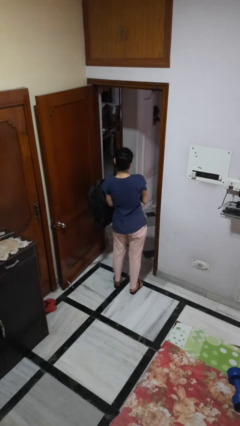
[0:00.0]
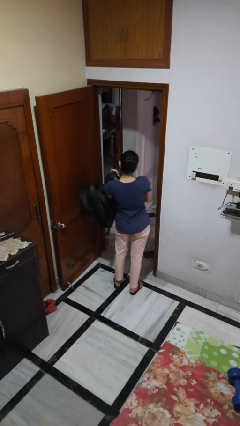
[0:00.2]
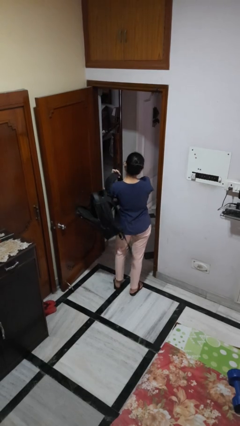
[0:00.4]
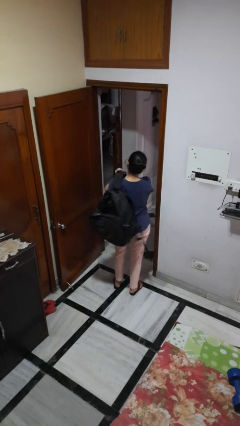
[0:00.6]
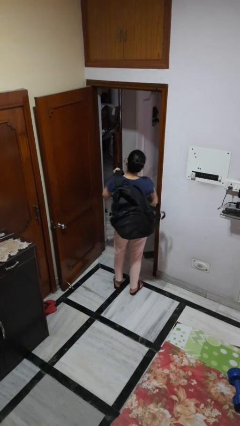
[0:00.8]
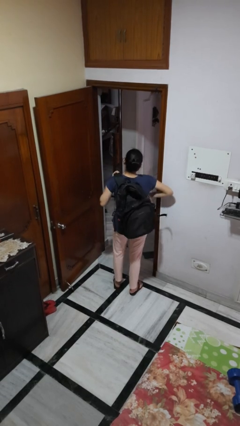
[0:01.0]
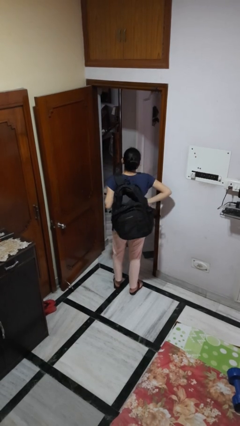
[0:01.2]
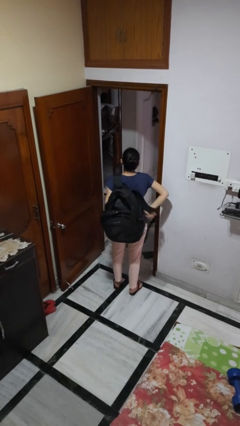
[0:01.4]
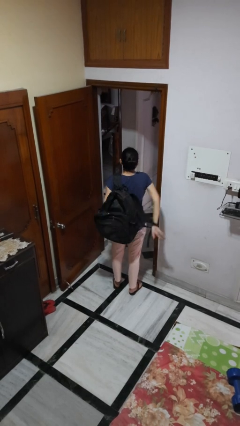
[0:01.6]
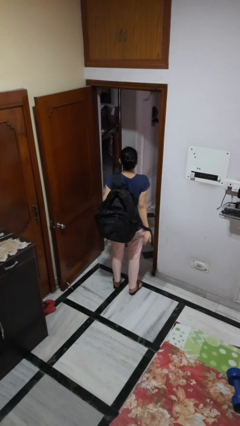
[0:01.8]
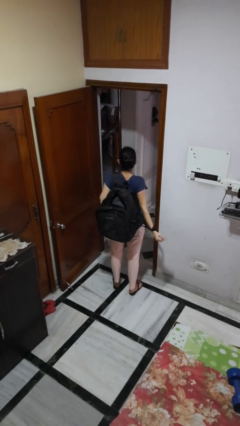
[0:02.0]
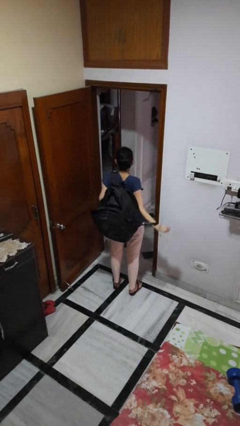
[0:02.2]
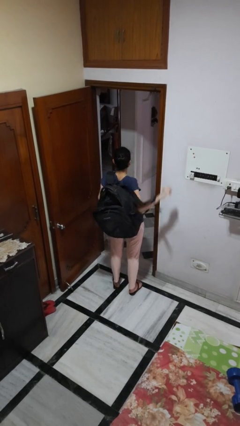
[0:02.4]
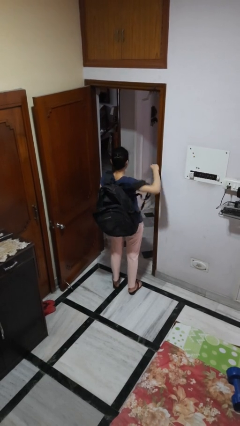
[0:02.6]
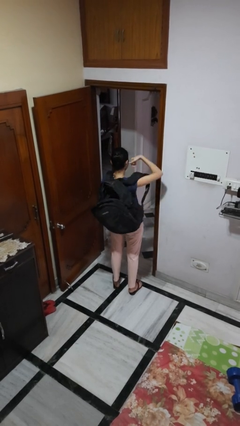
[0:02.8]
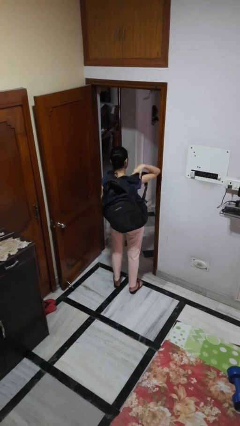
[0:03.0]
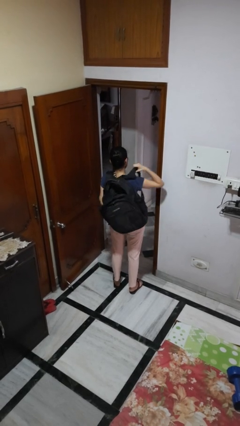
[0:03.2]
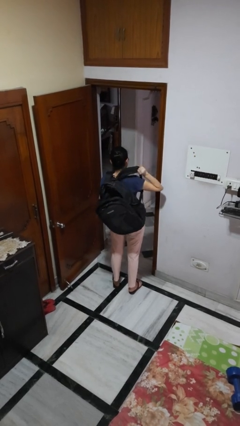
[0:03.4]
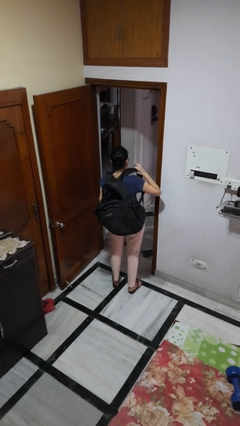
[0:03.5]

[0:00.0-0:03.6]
person puts on backpack

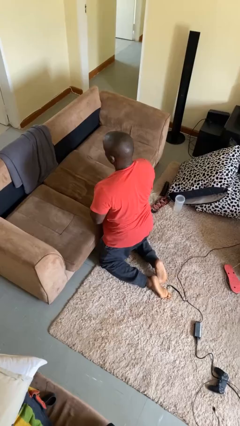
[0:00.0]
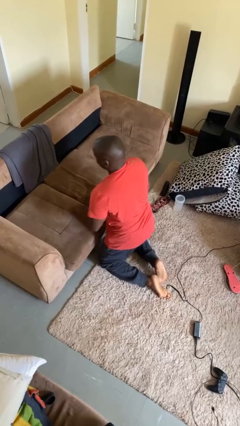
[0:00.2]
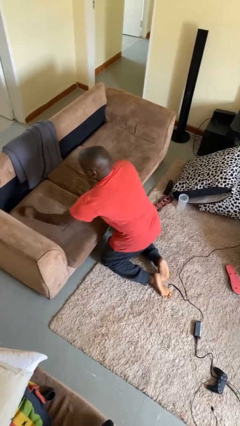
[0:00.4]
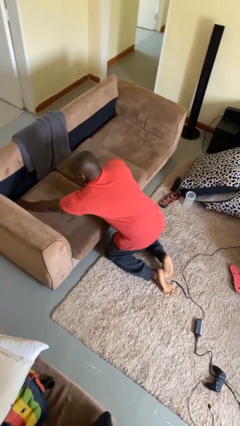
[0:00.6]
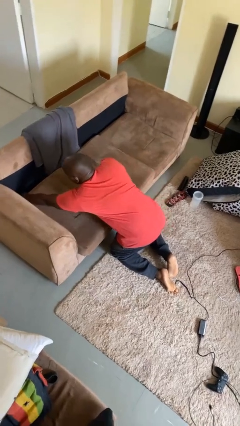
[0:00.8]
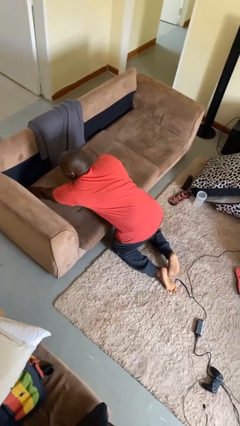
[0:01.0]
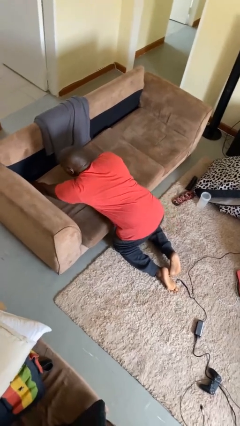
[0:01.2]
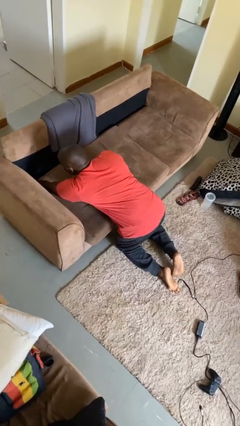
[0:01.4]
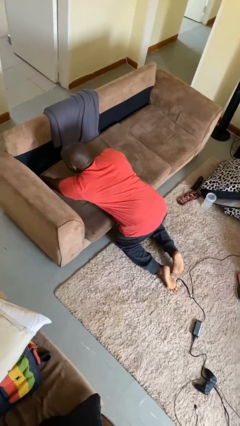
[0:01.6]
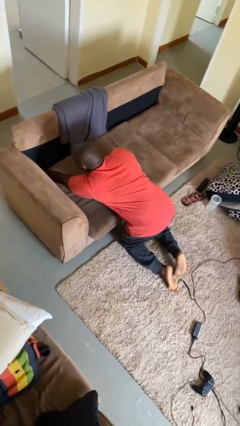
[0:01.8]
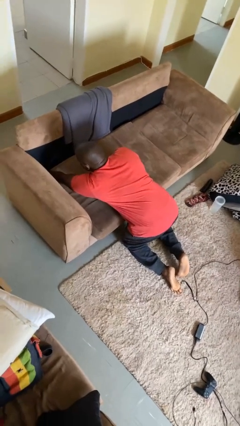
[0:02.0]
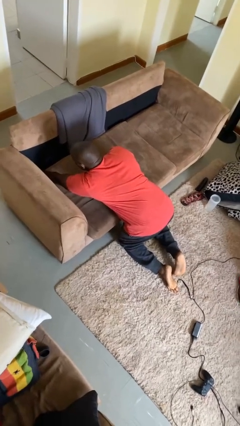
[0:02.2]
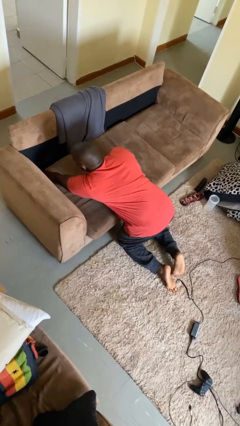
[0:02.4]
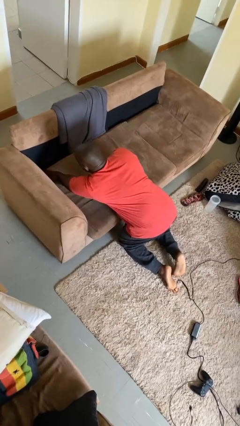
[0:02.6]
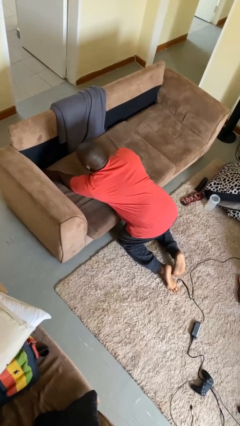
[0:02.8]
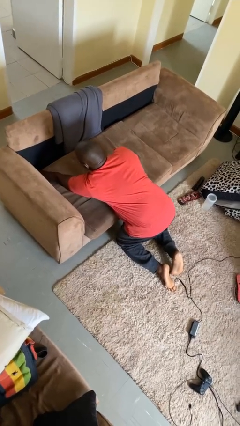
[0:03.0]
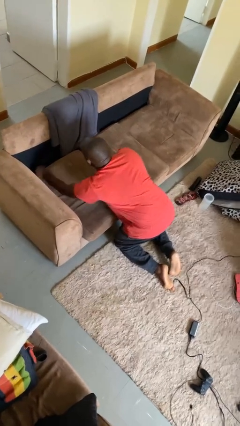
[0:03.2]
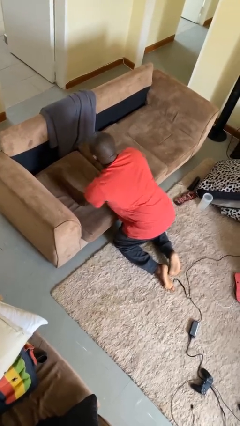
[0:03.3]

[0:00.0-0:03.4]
person searches in couch

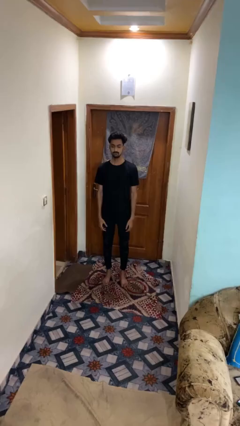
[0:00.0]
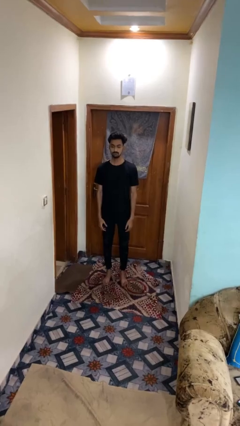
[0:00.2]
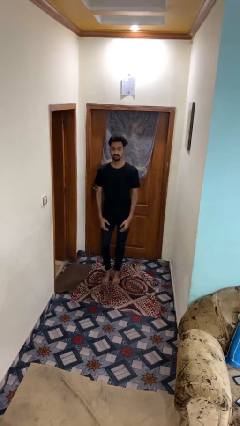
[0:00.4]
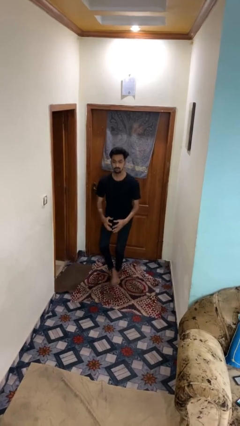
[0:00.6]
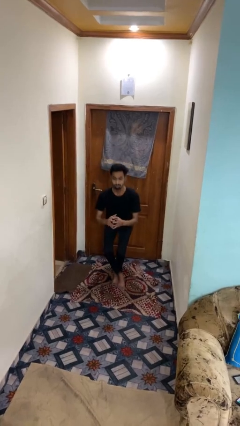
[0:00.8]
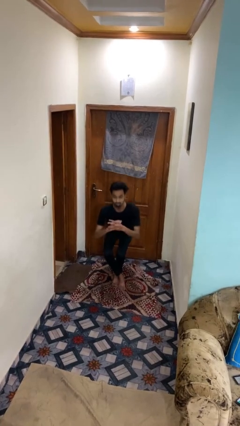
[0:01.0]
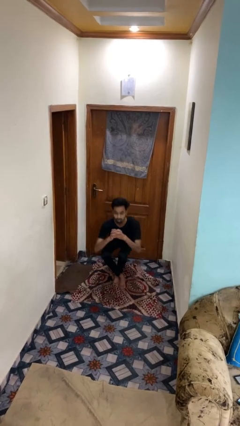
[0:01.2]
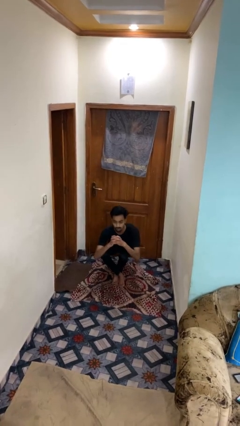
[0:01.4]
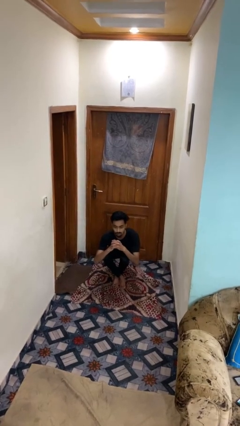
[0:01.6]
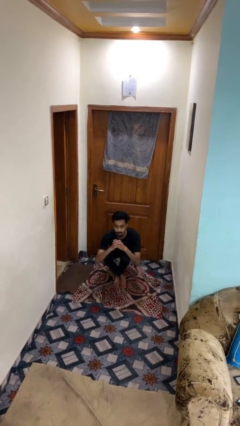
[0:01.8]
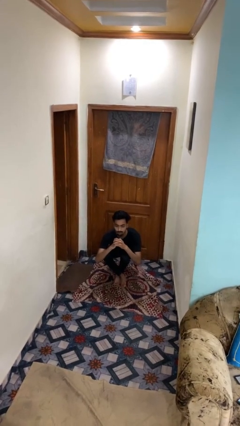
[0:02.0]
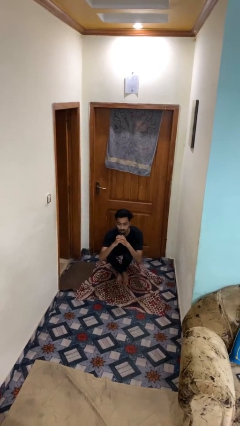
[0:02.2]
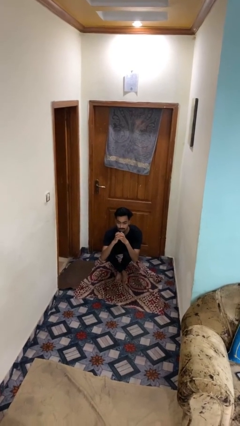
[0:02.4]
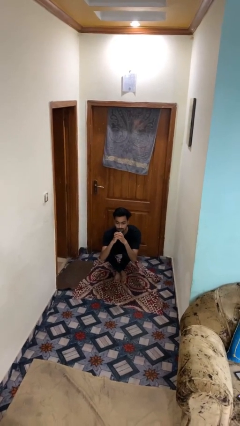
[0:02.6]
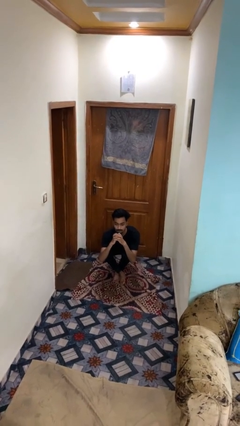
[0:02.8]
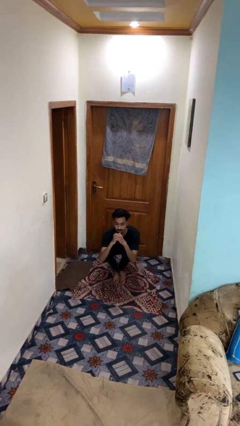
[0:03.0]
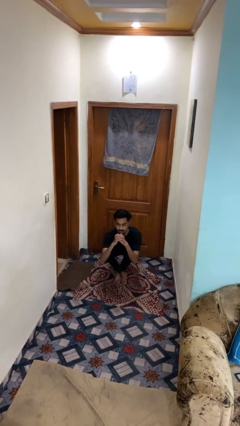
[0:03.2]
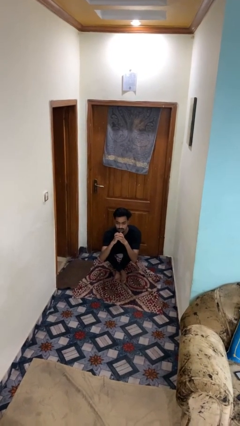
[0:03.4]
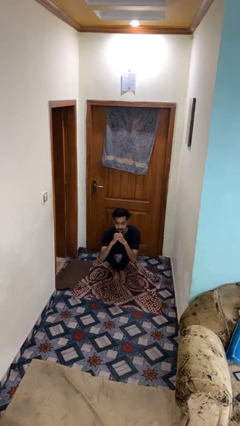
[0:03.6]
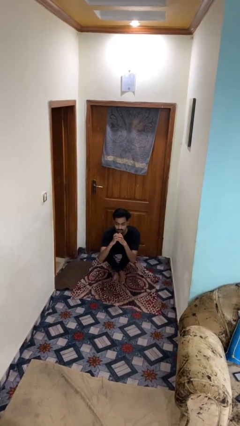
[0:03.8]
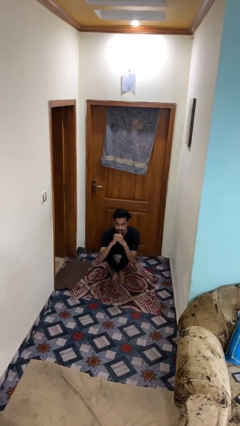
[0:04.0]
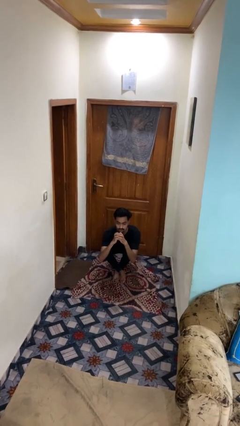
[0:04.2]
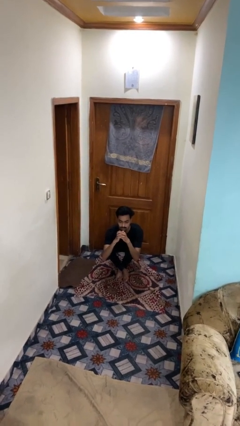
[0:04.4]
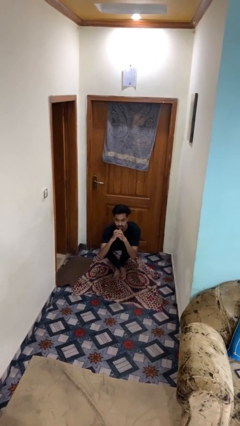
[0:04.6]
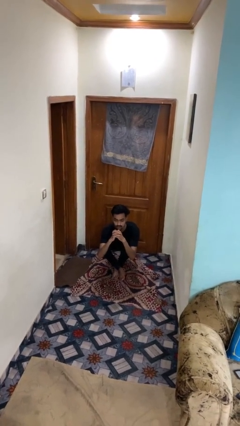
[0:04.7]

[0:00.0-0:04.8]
person sits crisscross

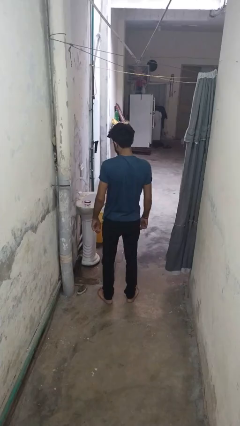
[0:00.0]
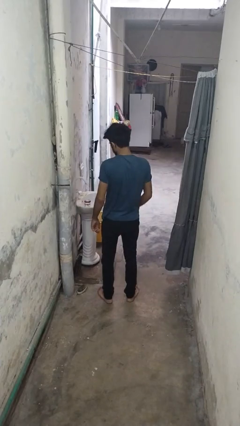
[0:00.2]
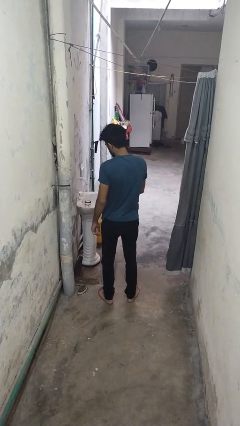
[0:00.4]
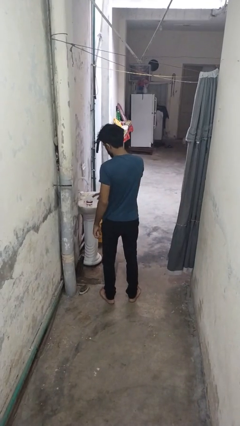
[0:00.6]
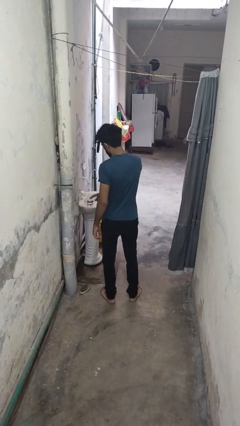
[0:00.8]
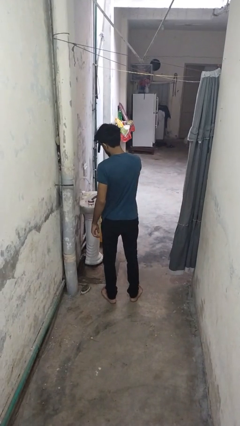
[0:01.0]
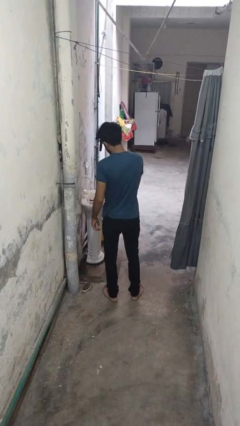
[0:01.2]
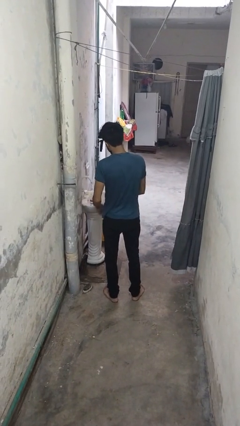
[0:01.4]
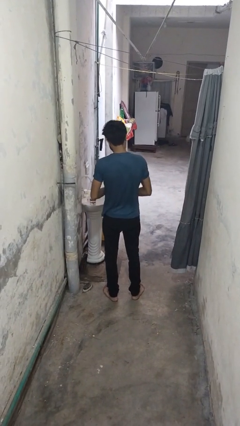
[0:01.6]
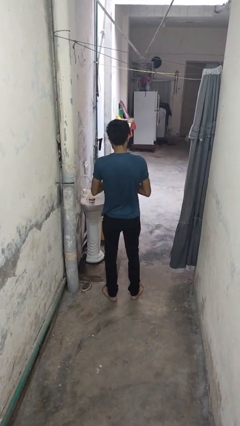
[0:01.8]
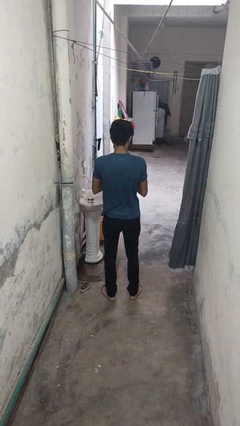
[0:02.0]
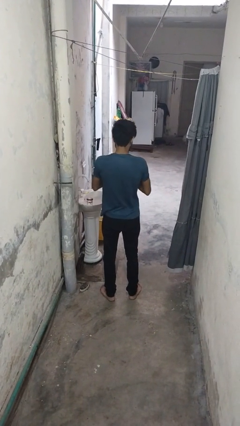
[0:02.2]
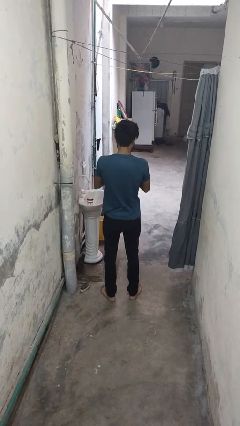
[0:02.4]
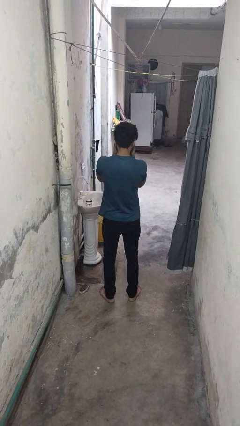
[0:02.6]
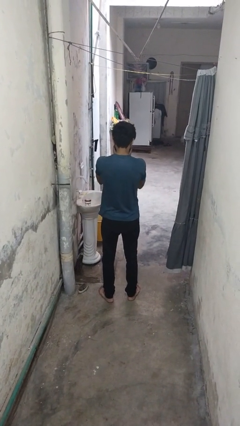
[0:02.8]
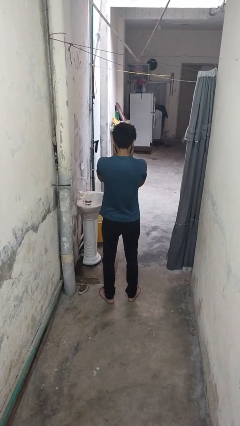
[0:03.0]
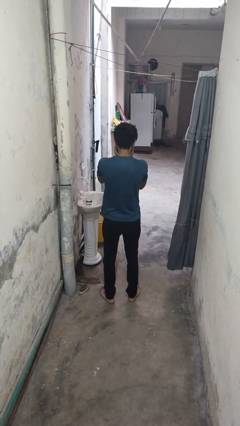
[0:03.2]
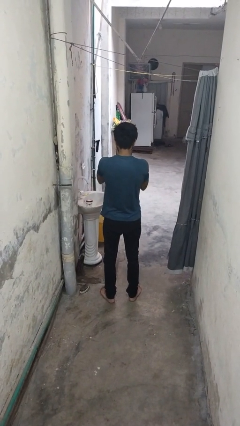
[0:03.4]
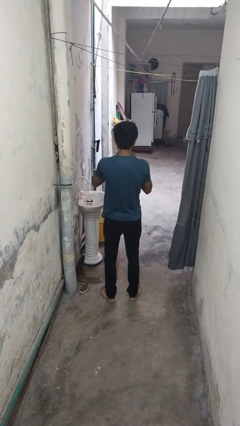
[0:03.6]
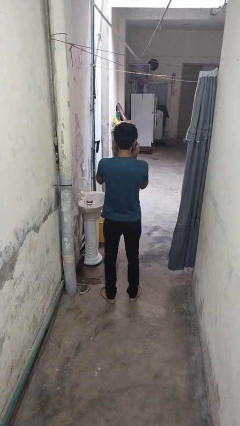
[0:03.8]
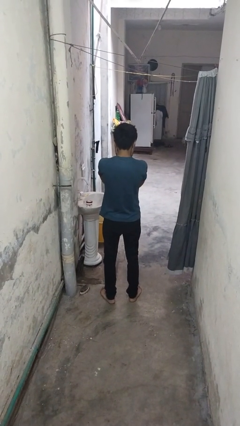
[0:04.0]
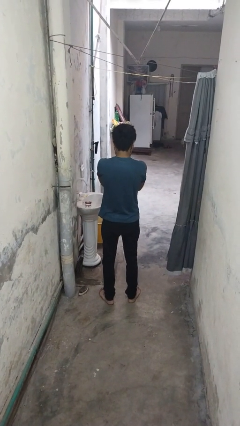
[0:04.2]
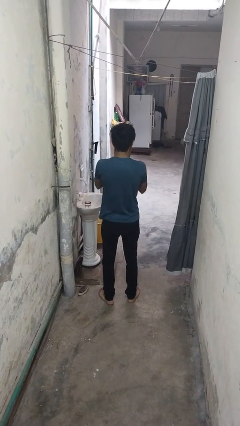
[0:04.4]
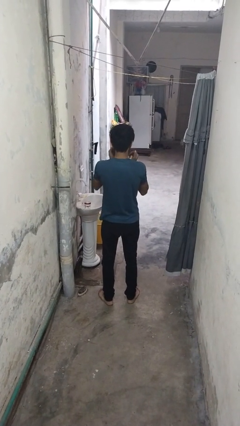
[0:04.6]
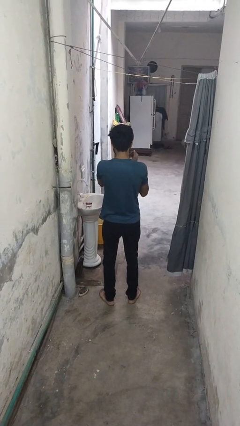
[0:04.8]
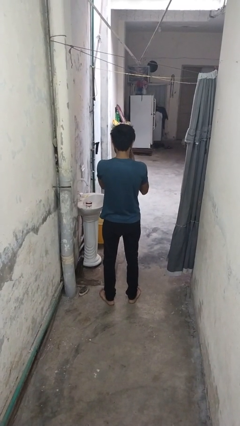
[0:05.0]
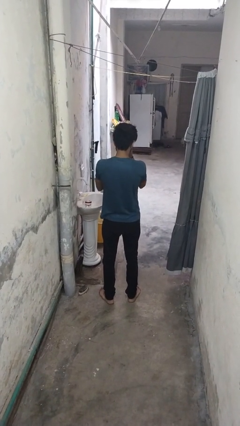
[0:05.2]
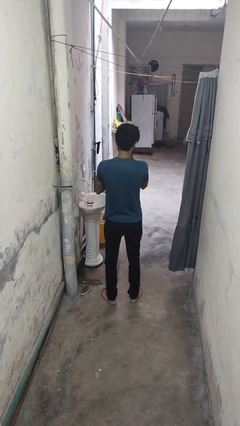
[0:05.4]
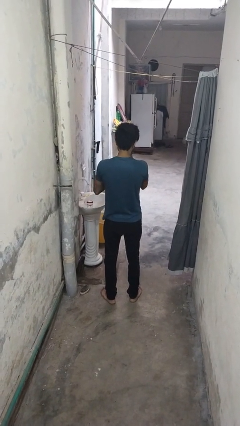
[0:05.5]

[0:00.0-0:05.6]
person applies facial moisturizer

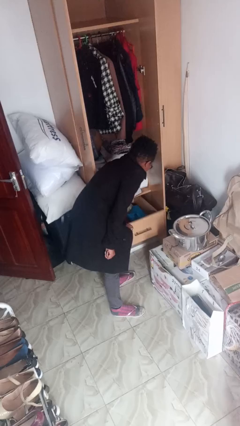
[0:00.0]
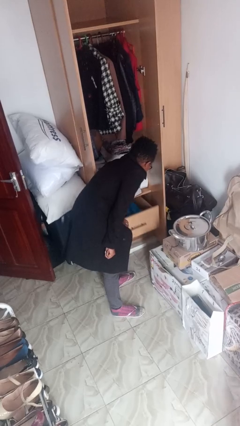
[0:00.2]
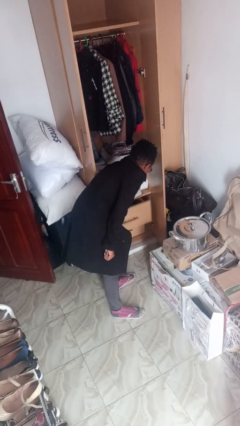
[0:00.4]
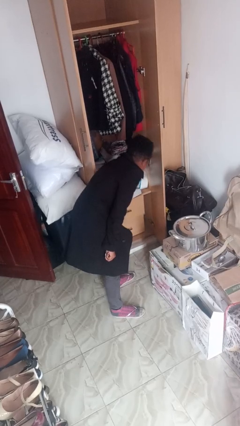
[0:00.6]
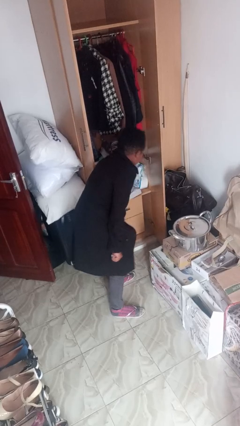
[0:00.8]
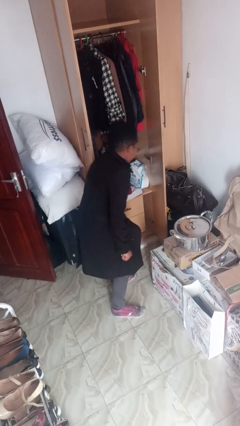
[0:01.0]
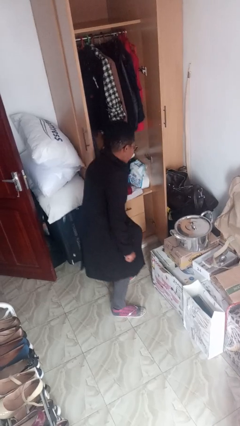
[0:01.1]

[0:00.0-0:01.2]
person closes dresser drawer
